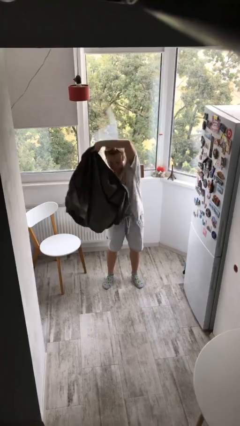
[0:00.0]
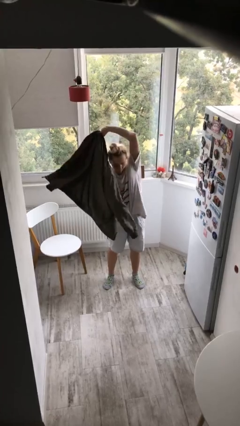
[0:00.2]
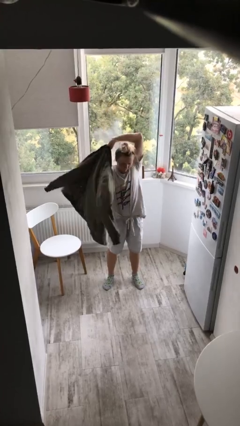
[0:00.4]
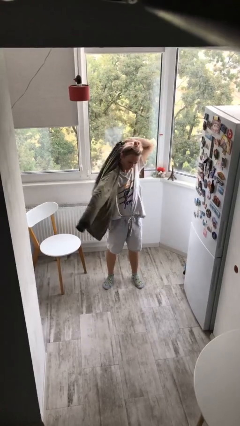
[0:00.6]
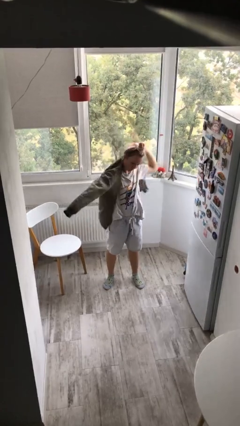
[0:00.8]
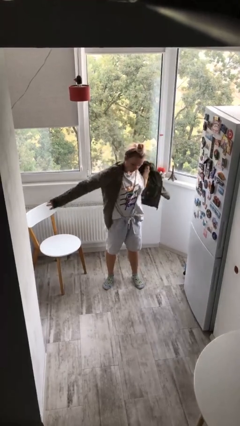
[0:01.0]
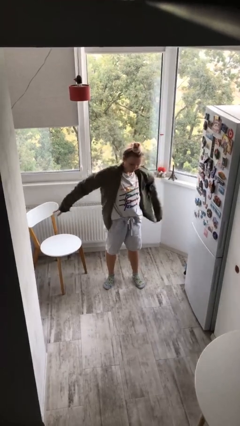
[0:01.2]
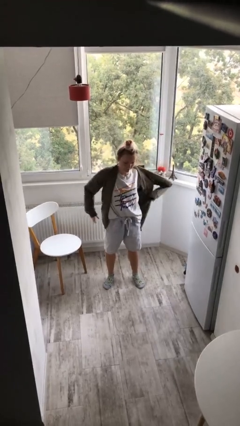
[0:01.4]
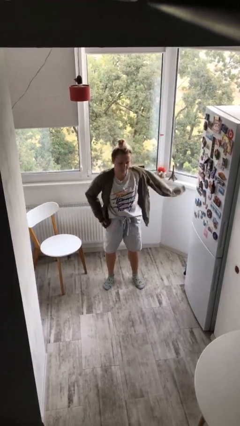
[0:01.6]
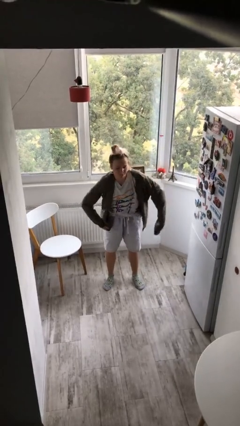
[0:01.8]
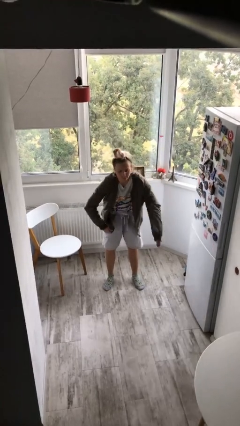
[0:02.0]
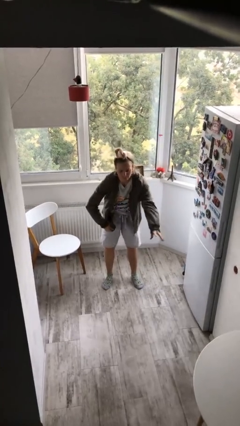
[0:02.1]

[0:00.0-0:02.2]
person puts on jacket

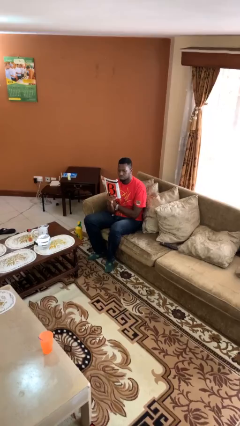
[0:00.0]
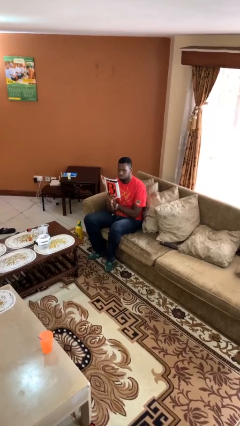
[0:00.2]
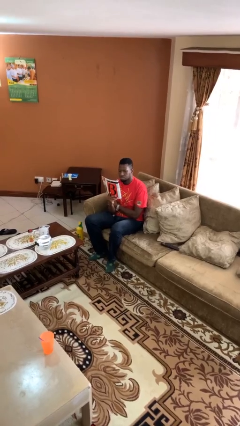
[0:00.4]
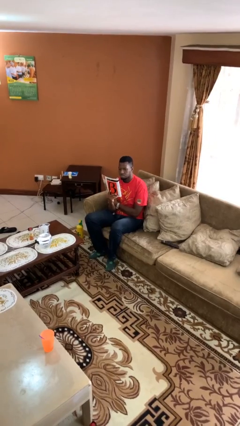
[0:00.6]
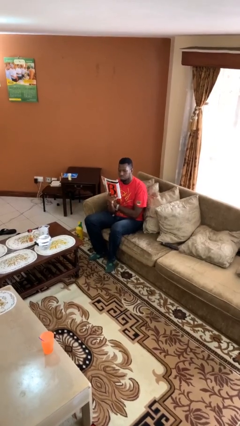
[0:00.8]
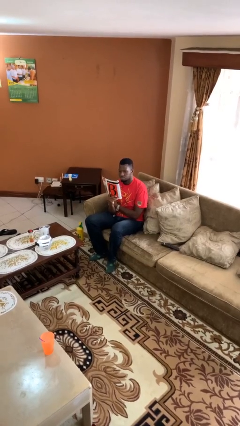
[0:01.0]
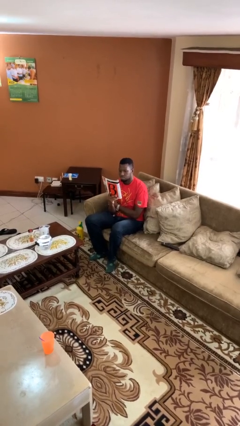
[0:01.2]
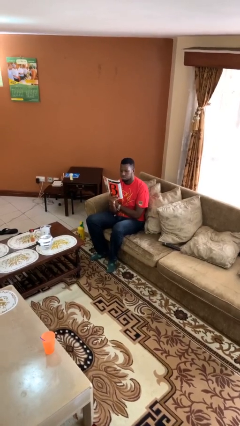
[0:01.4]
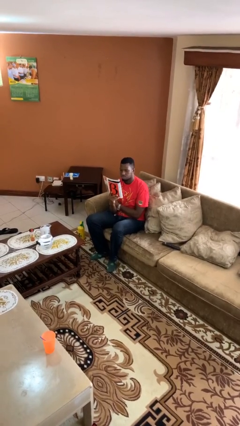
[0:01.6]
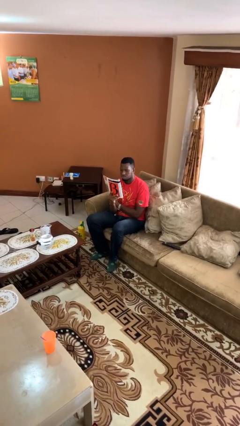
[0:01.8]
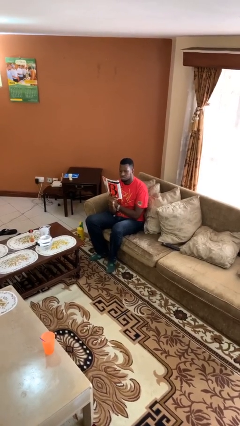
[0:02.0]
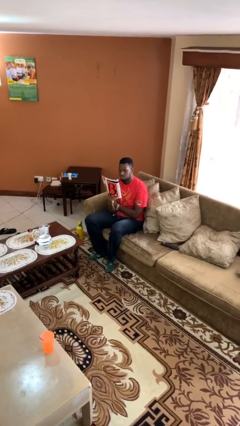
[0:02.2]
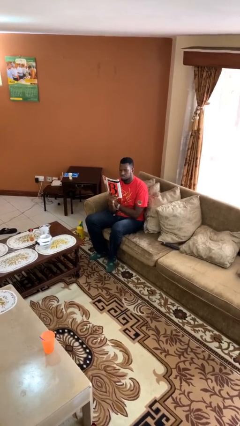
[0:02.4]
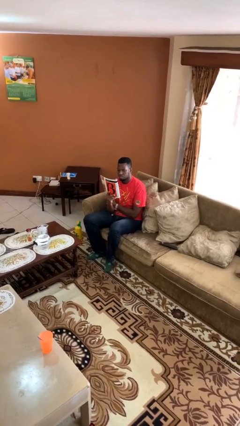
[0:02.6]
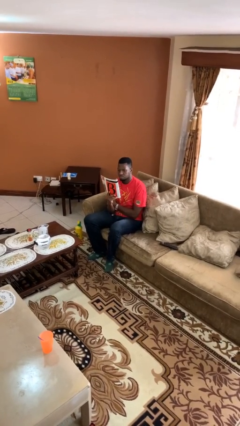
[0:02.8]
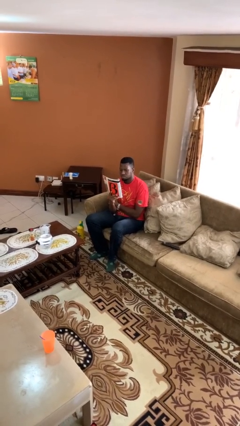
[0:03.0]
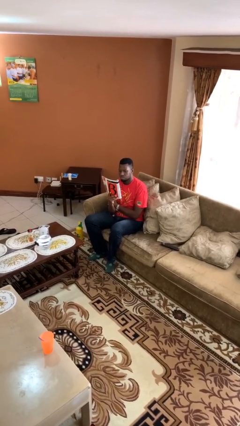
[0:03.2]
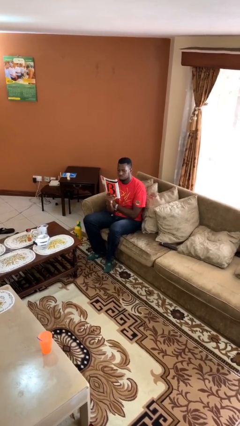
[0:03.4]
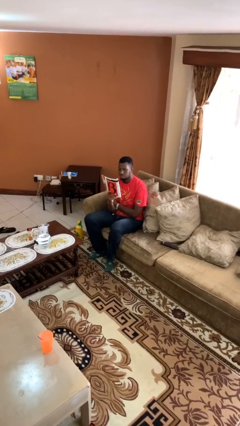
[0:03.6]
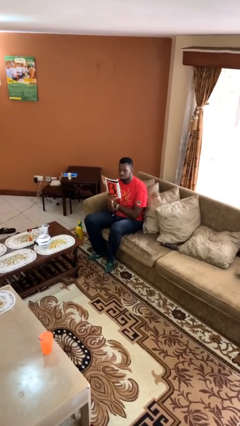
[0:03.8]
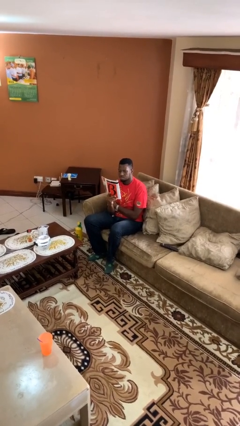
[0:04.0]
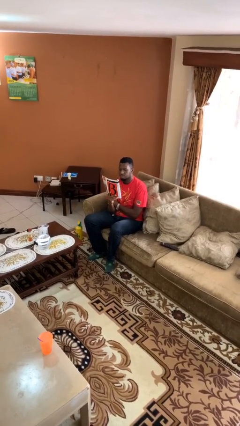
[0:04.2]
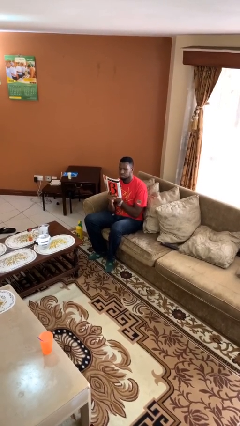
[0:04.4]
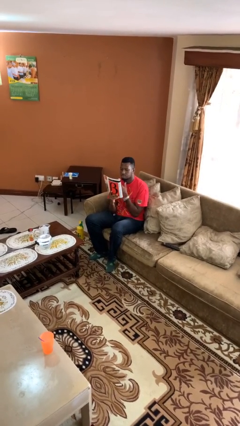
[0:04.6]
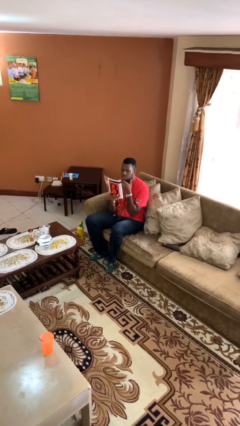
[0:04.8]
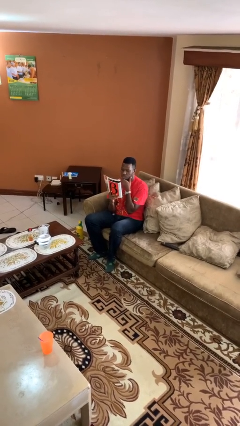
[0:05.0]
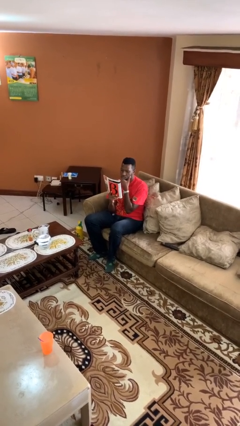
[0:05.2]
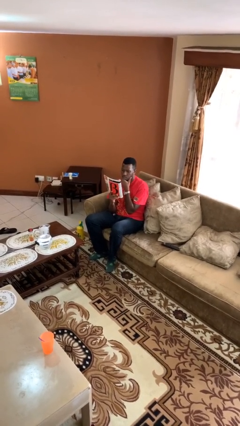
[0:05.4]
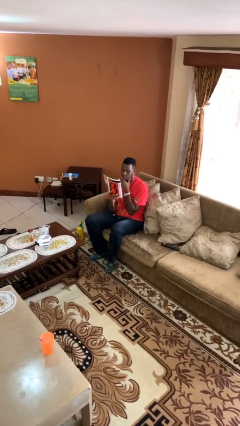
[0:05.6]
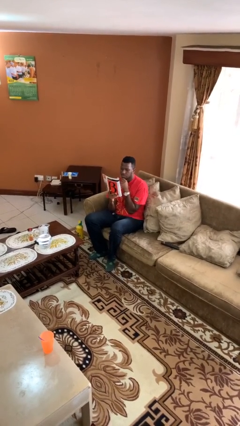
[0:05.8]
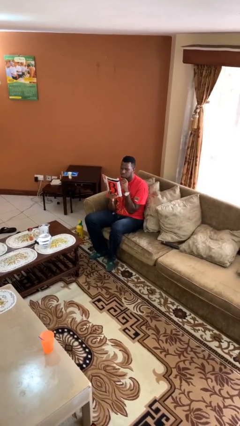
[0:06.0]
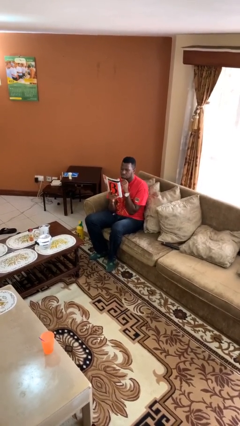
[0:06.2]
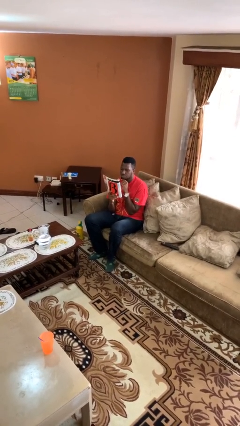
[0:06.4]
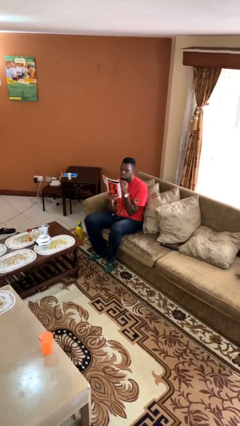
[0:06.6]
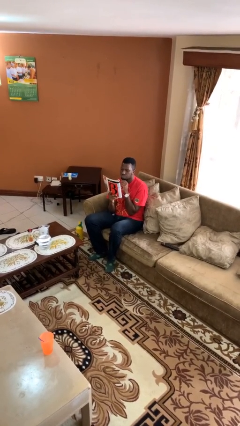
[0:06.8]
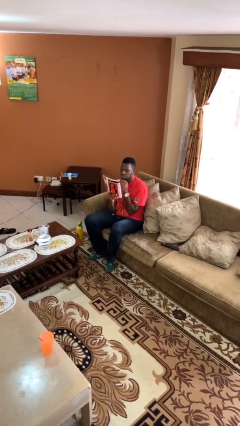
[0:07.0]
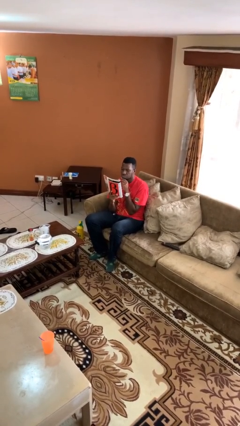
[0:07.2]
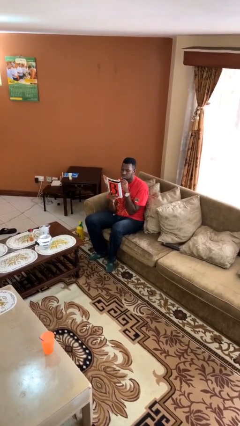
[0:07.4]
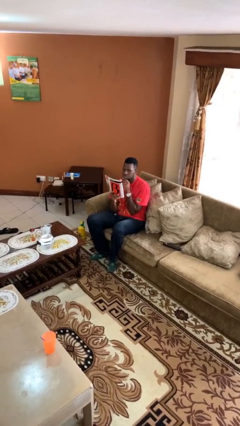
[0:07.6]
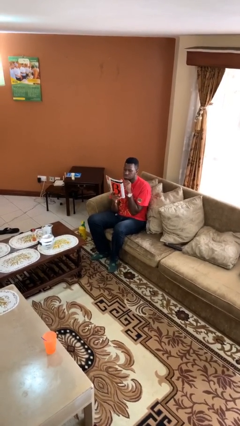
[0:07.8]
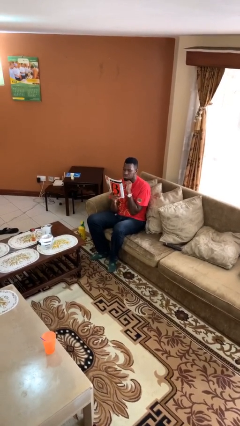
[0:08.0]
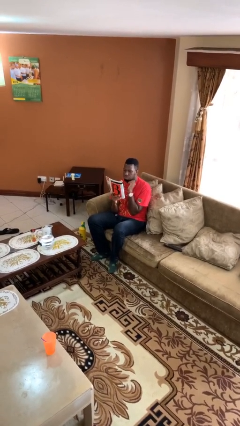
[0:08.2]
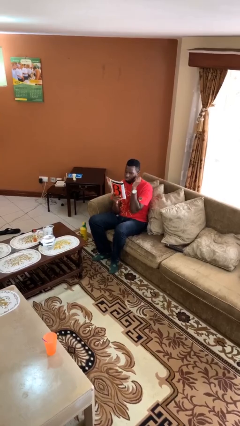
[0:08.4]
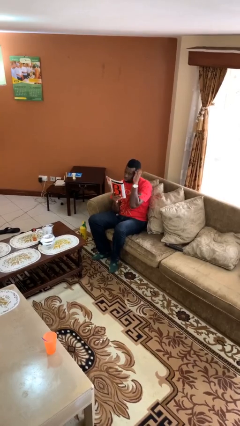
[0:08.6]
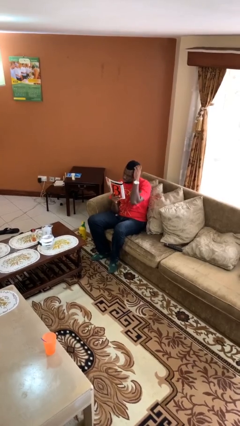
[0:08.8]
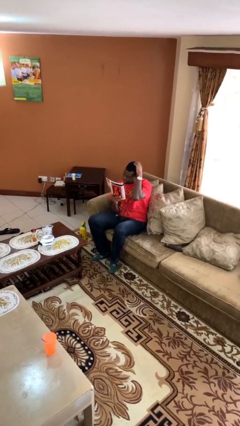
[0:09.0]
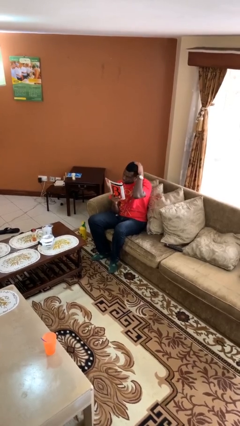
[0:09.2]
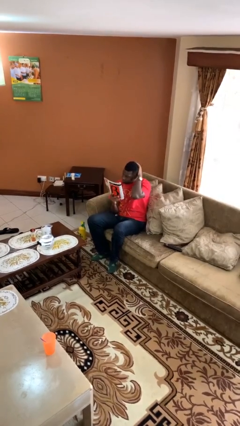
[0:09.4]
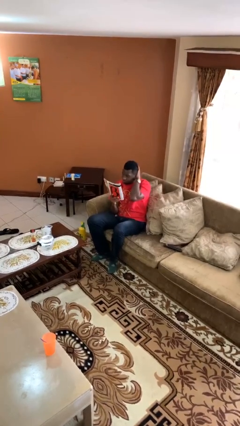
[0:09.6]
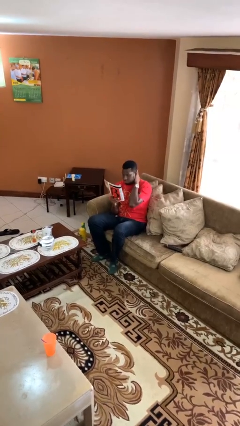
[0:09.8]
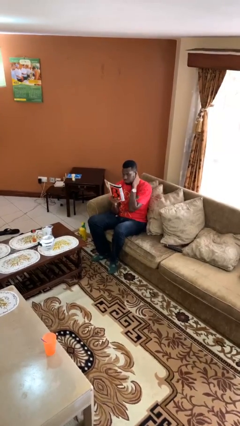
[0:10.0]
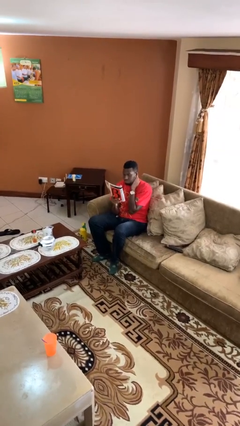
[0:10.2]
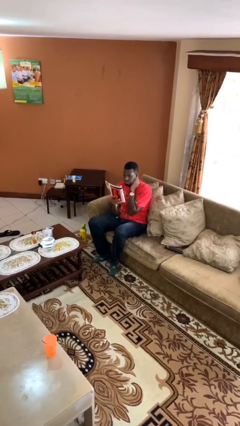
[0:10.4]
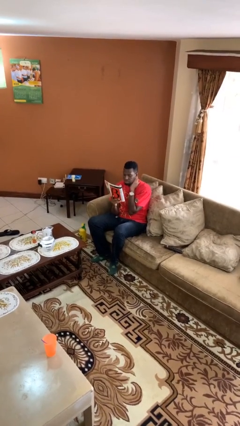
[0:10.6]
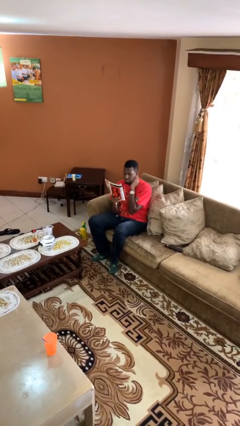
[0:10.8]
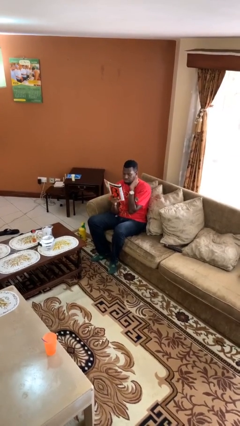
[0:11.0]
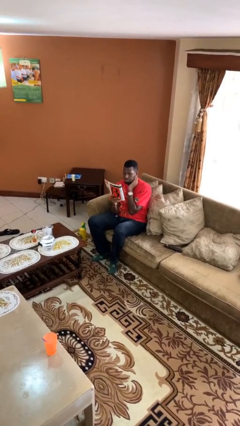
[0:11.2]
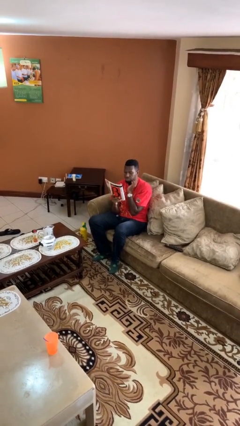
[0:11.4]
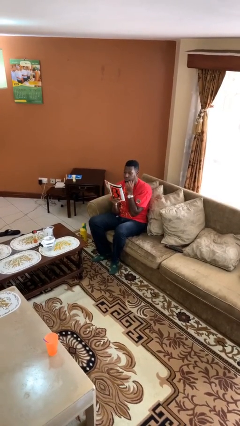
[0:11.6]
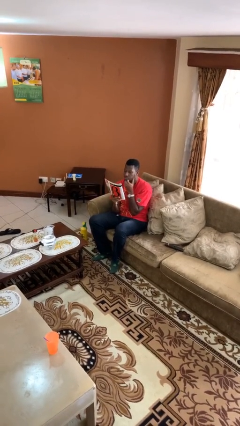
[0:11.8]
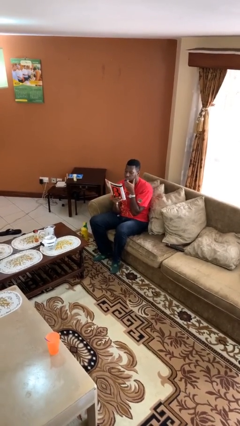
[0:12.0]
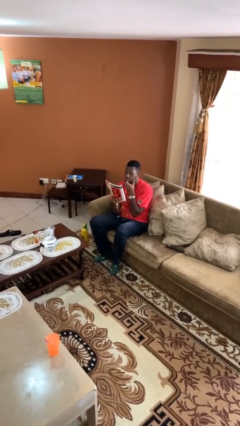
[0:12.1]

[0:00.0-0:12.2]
person reads document

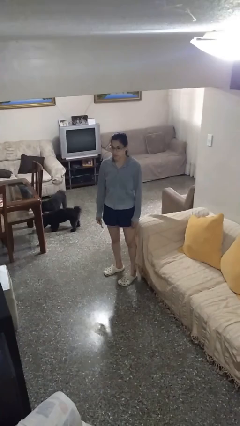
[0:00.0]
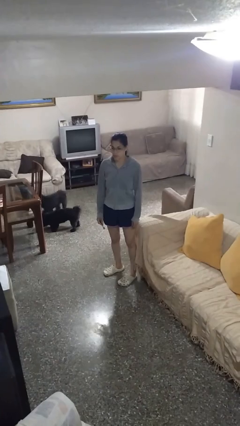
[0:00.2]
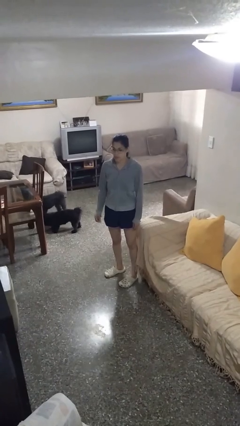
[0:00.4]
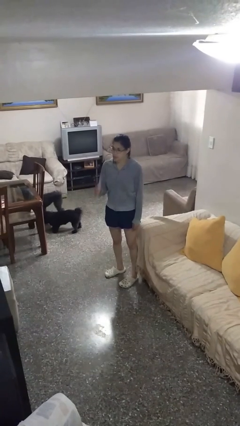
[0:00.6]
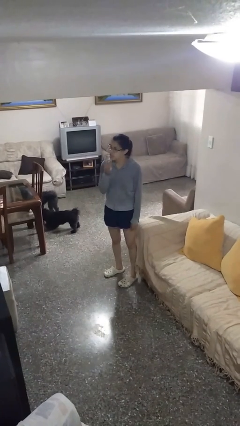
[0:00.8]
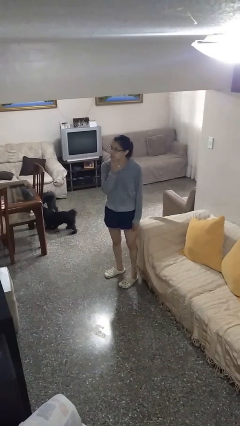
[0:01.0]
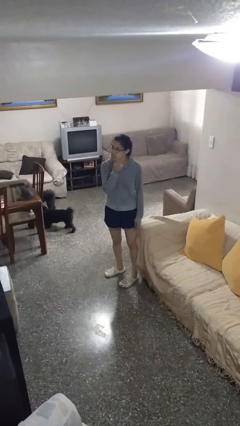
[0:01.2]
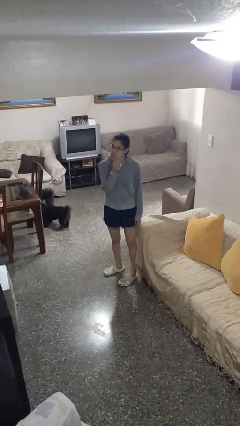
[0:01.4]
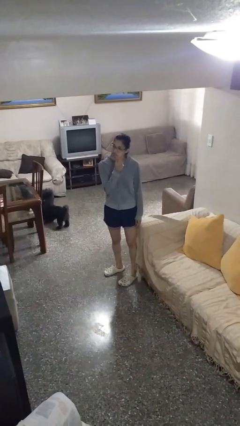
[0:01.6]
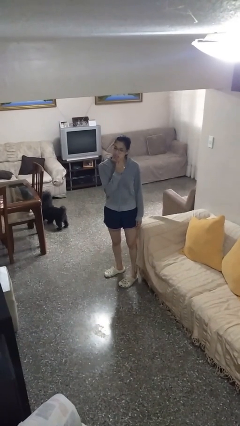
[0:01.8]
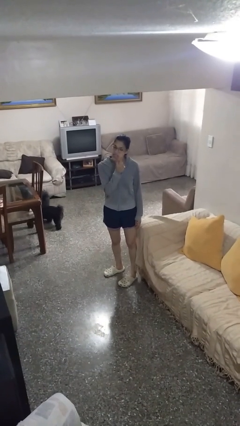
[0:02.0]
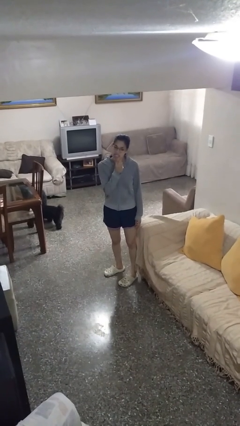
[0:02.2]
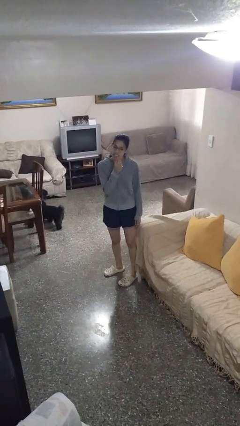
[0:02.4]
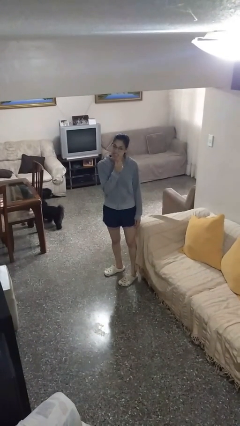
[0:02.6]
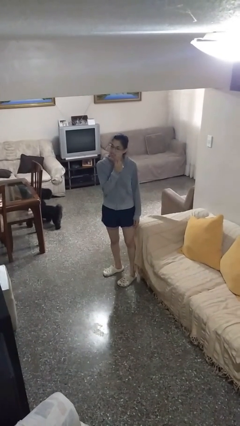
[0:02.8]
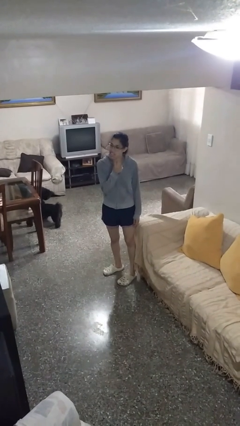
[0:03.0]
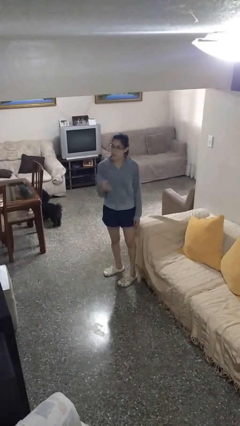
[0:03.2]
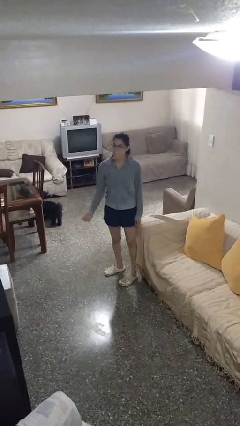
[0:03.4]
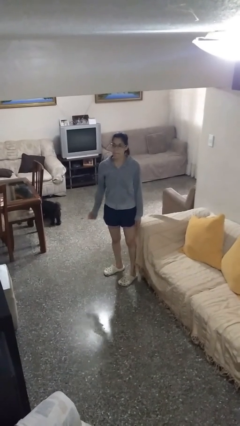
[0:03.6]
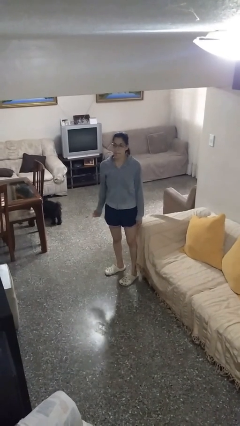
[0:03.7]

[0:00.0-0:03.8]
person brushes teeth
